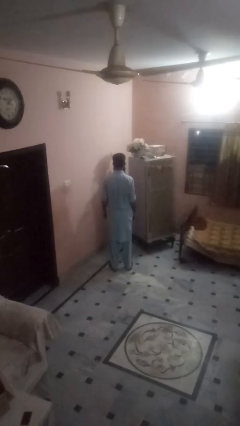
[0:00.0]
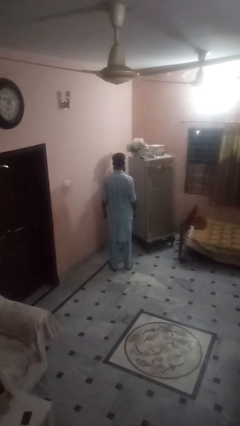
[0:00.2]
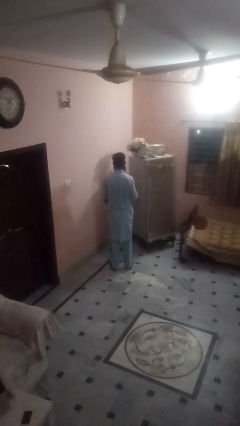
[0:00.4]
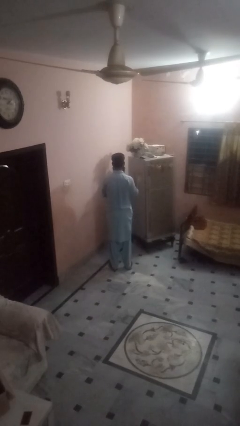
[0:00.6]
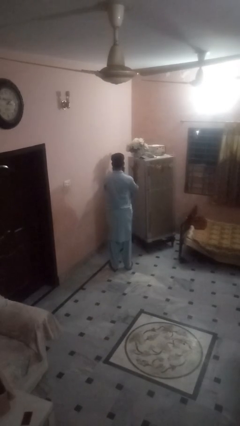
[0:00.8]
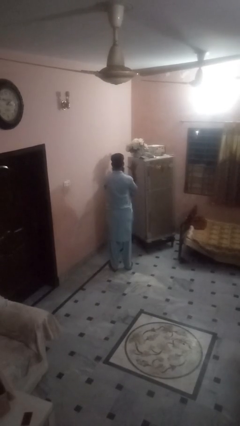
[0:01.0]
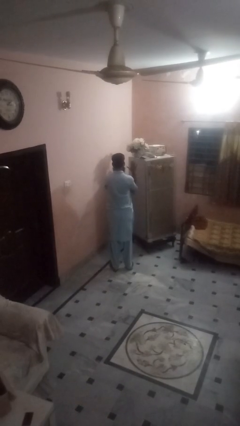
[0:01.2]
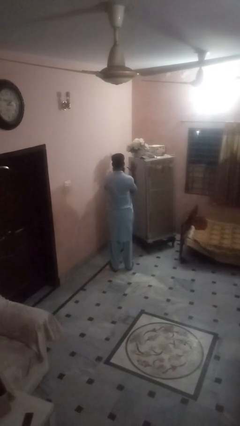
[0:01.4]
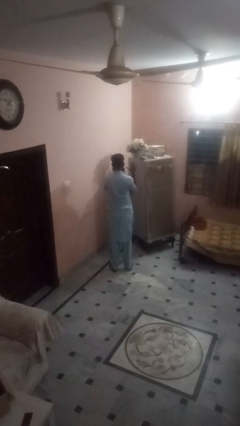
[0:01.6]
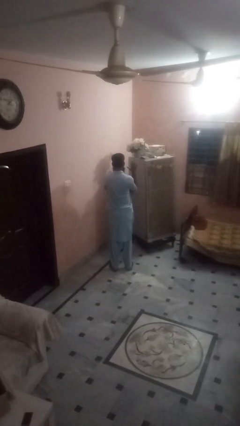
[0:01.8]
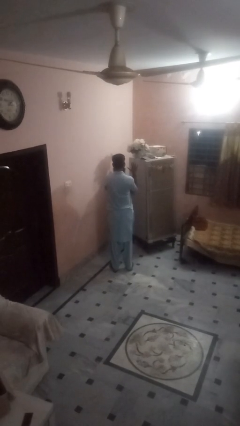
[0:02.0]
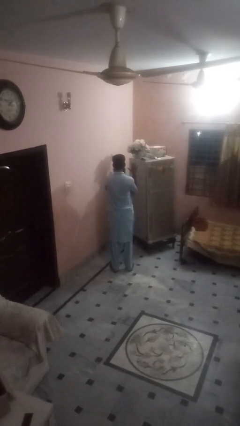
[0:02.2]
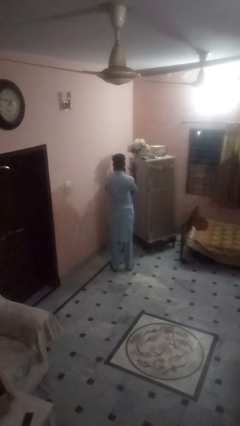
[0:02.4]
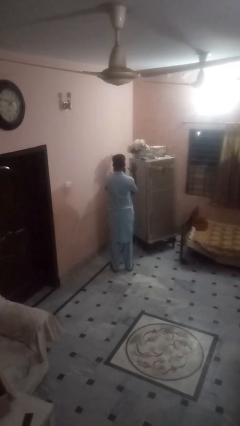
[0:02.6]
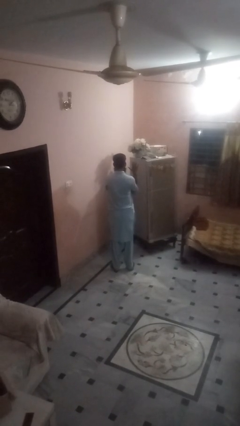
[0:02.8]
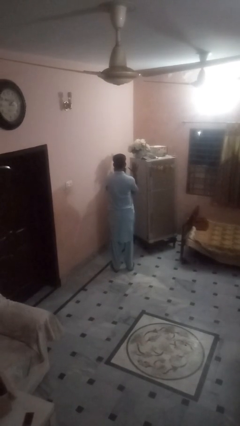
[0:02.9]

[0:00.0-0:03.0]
person gestures number five

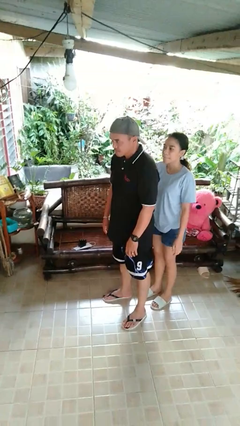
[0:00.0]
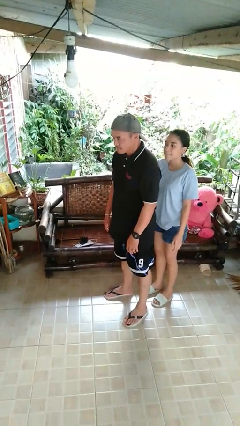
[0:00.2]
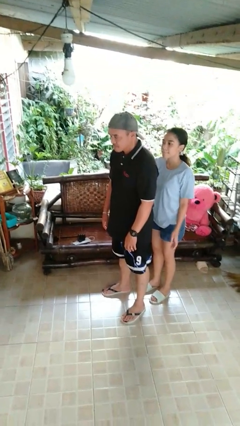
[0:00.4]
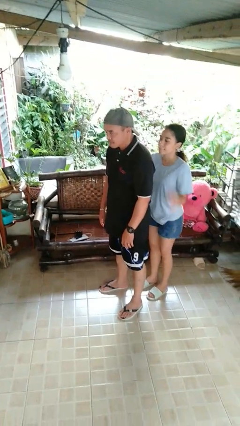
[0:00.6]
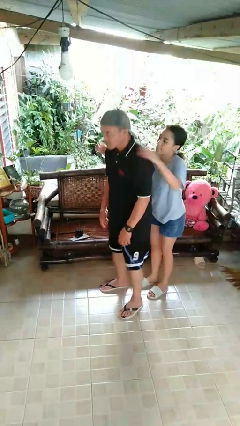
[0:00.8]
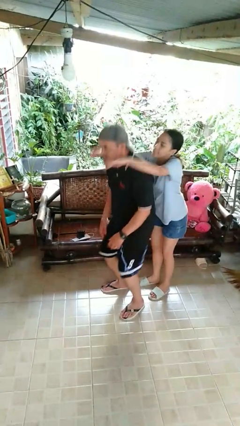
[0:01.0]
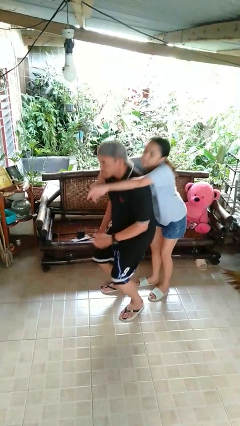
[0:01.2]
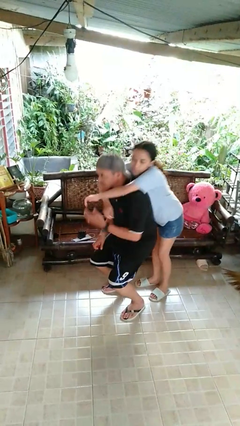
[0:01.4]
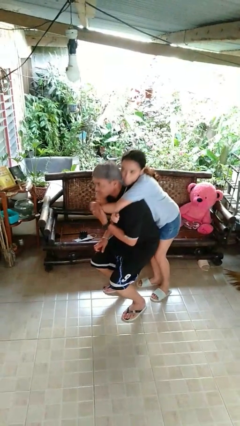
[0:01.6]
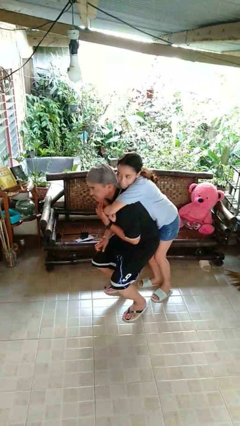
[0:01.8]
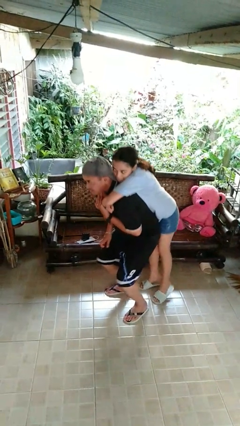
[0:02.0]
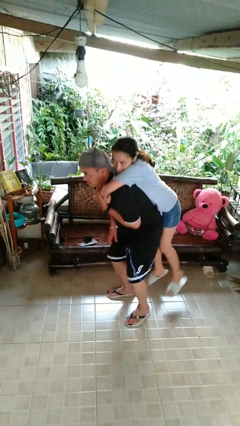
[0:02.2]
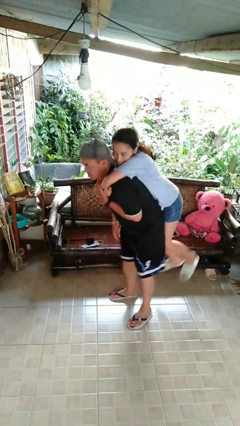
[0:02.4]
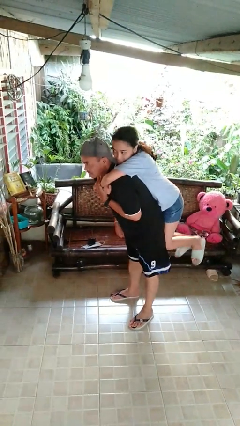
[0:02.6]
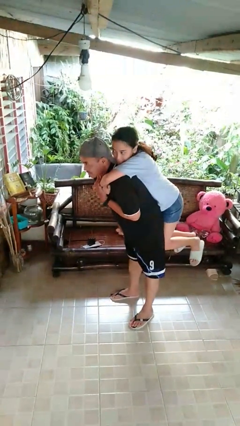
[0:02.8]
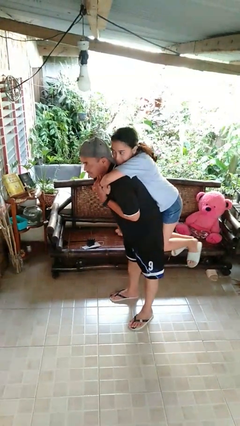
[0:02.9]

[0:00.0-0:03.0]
person picks up person

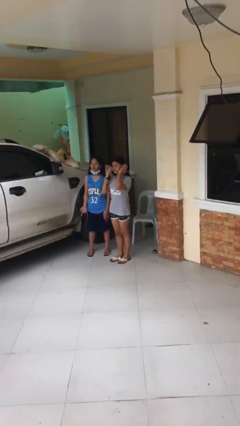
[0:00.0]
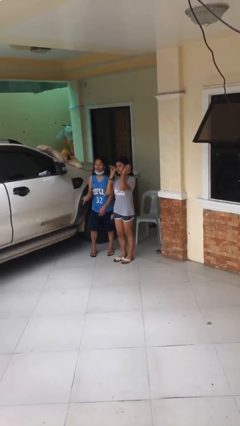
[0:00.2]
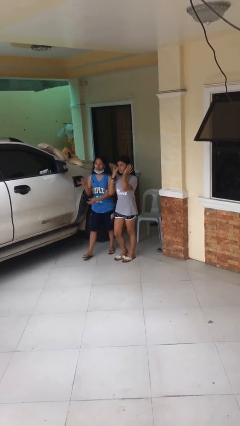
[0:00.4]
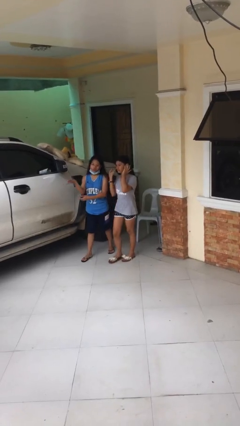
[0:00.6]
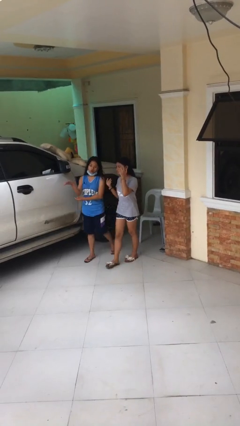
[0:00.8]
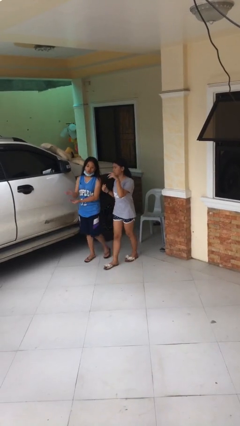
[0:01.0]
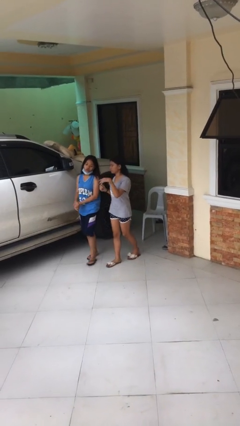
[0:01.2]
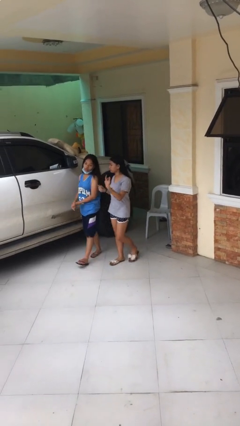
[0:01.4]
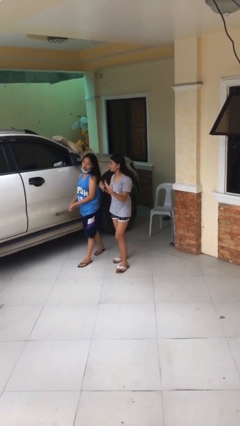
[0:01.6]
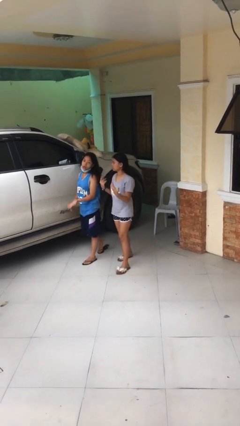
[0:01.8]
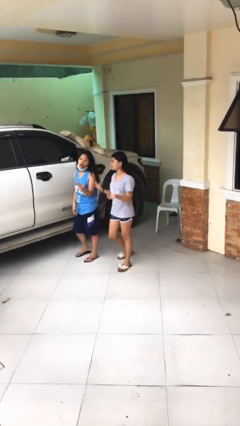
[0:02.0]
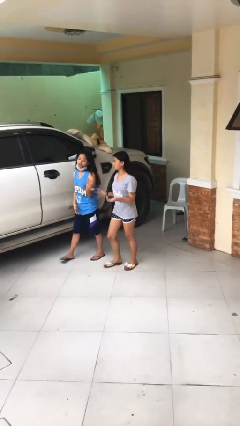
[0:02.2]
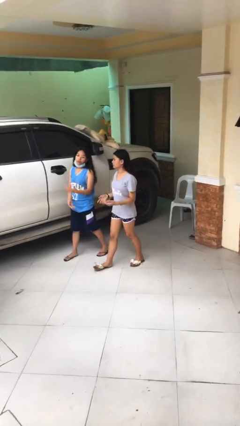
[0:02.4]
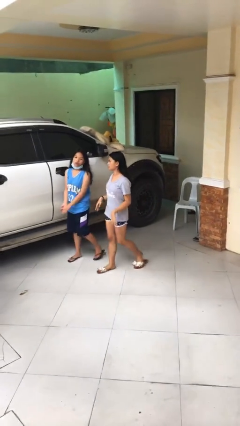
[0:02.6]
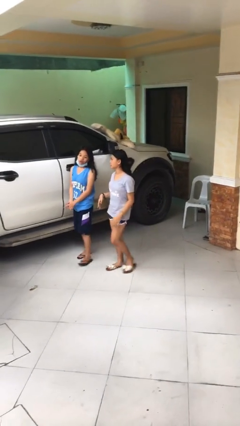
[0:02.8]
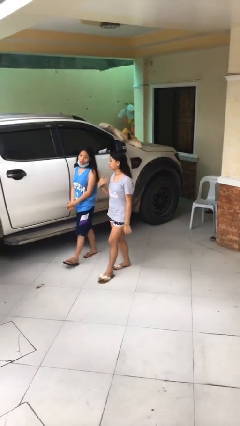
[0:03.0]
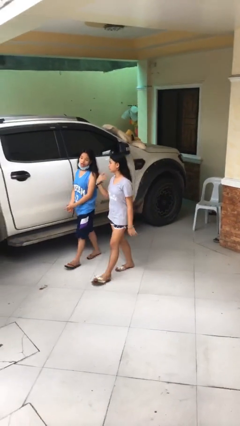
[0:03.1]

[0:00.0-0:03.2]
person talks to person

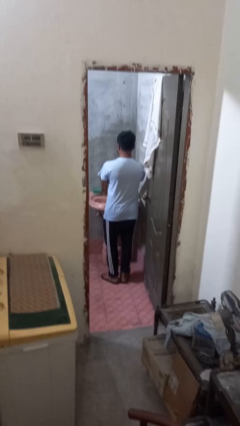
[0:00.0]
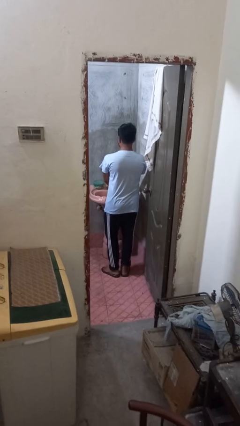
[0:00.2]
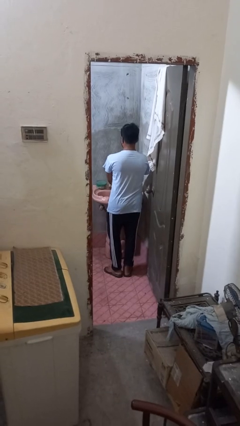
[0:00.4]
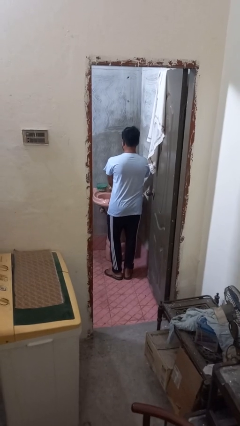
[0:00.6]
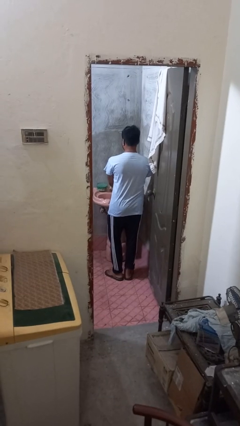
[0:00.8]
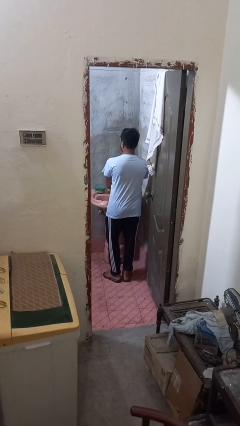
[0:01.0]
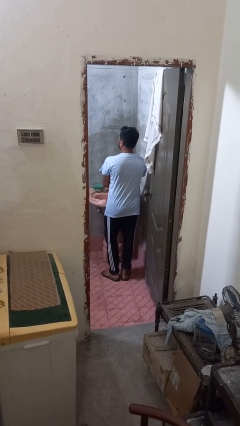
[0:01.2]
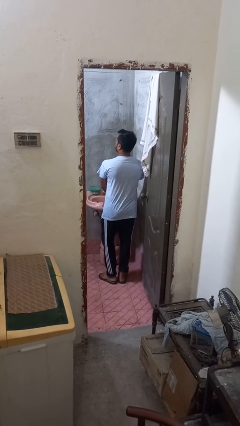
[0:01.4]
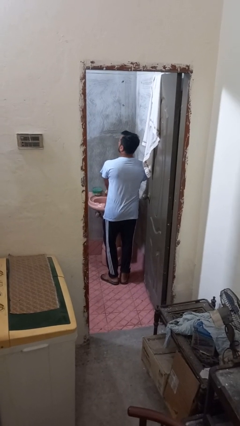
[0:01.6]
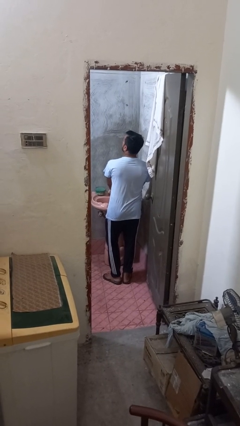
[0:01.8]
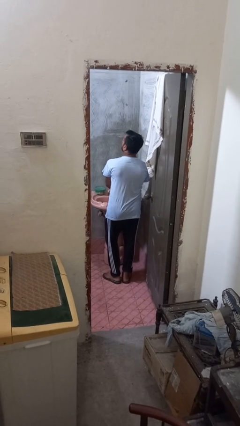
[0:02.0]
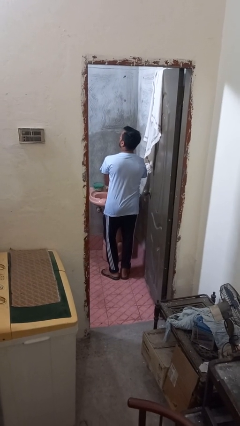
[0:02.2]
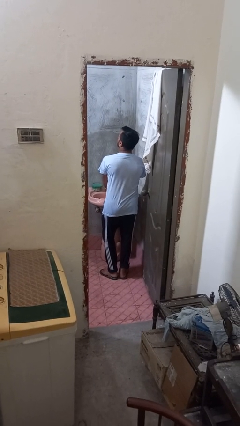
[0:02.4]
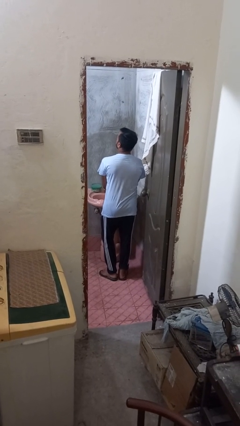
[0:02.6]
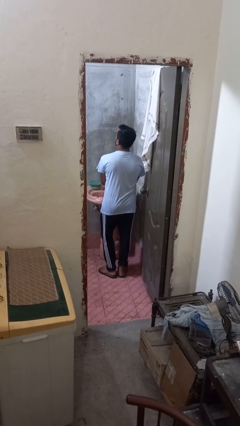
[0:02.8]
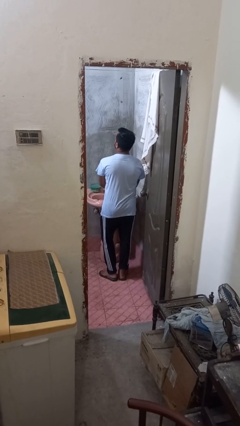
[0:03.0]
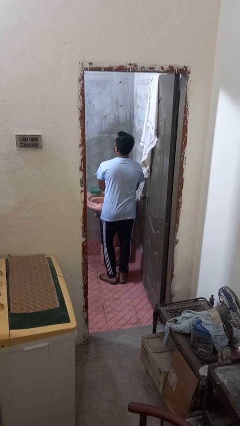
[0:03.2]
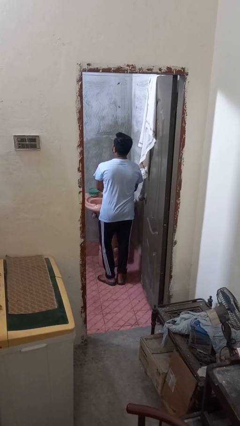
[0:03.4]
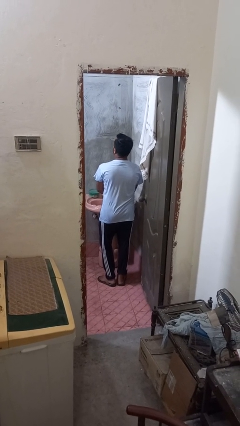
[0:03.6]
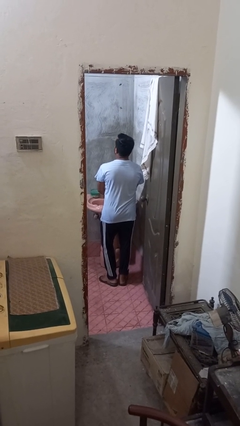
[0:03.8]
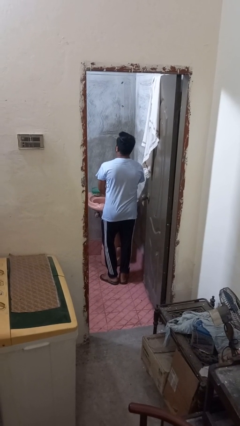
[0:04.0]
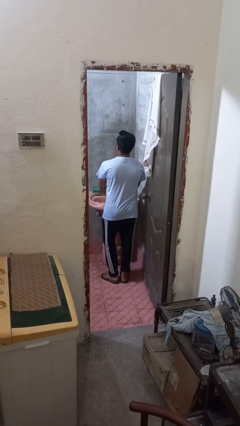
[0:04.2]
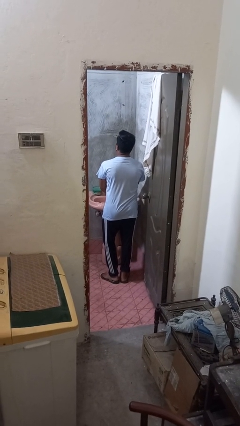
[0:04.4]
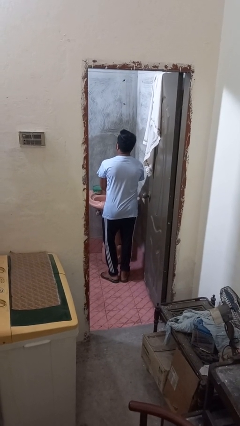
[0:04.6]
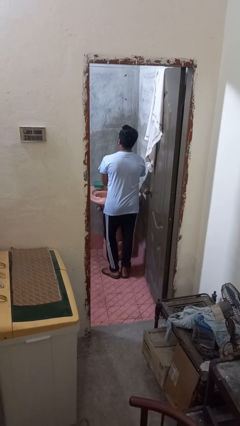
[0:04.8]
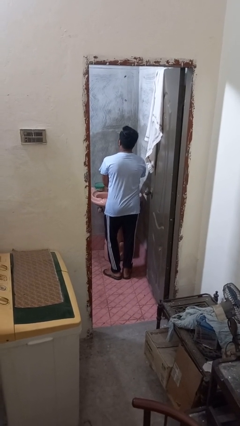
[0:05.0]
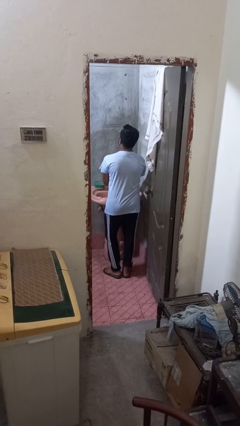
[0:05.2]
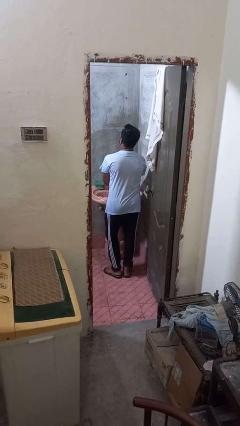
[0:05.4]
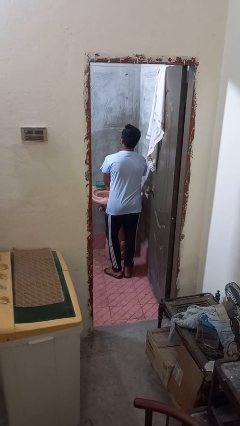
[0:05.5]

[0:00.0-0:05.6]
person washes hands

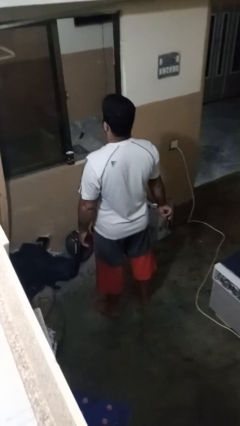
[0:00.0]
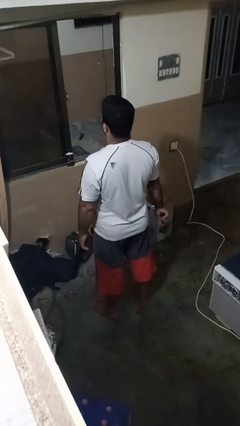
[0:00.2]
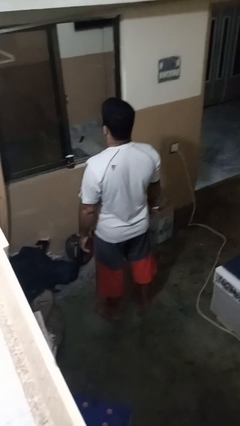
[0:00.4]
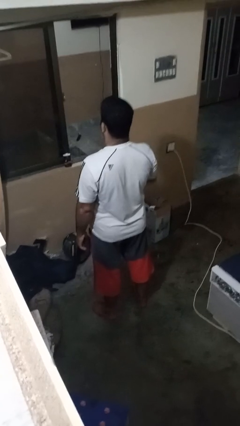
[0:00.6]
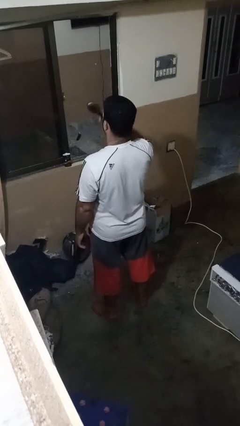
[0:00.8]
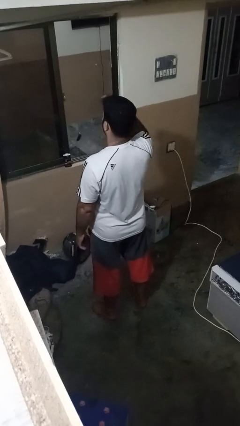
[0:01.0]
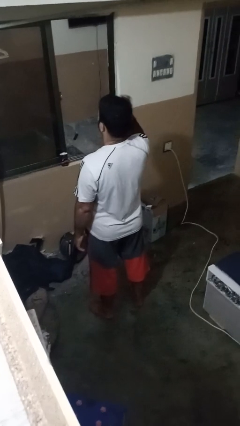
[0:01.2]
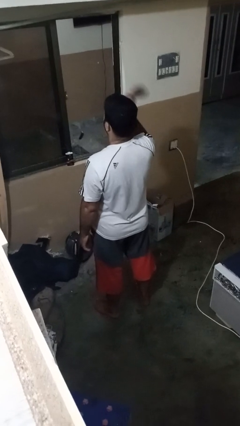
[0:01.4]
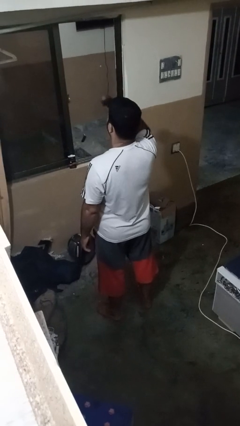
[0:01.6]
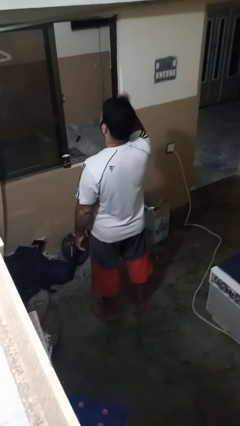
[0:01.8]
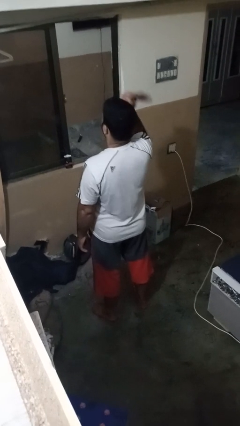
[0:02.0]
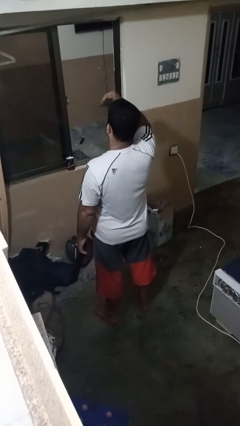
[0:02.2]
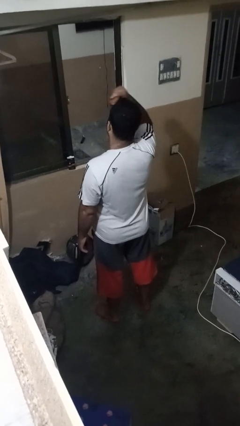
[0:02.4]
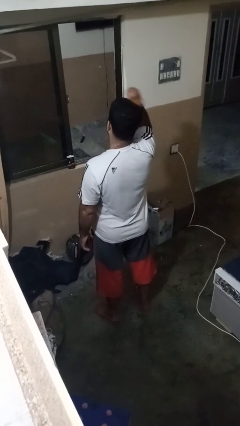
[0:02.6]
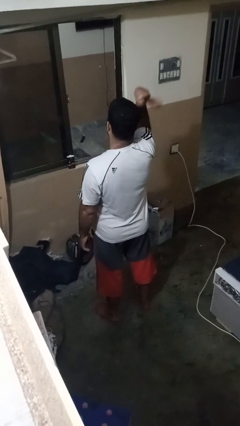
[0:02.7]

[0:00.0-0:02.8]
person brushes hair
